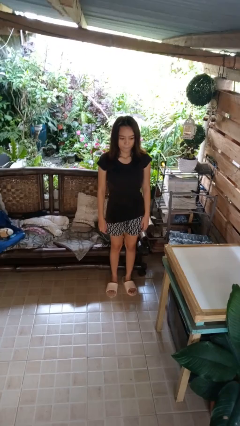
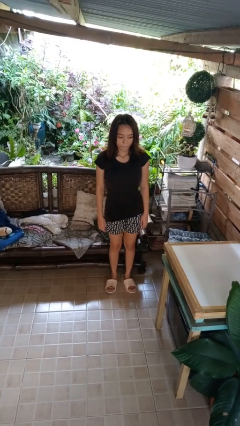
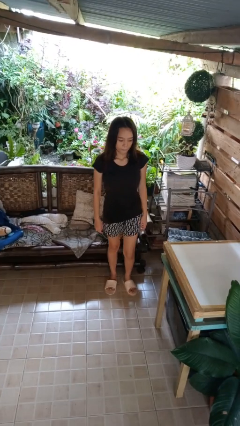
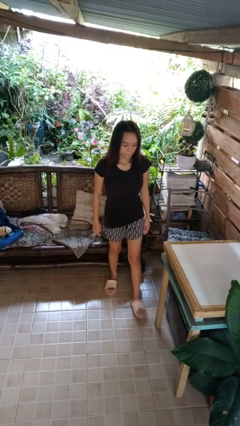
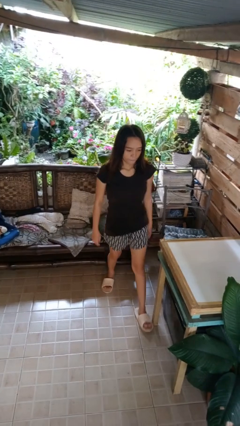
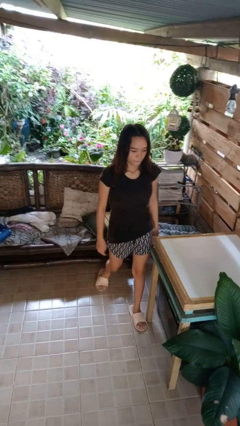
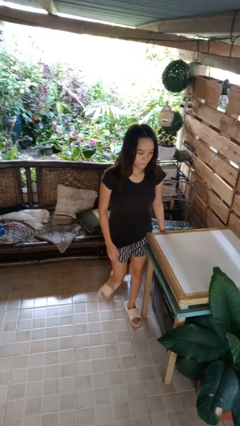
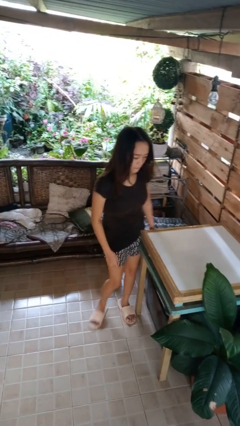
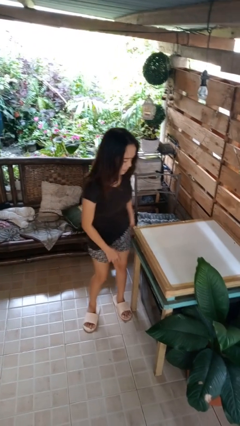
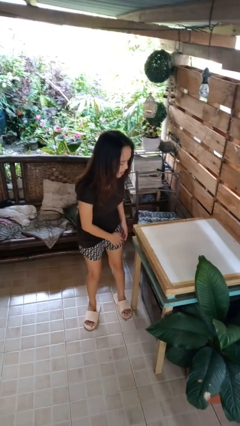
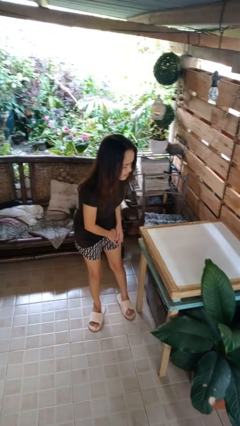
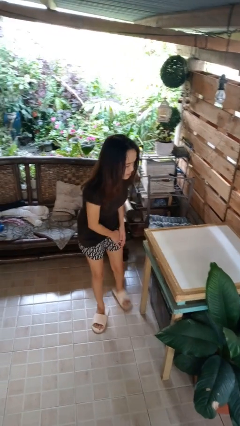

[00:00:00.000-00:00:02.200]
person bumps into table

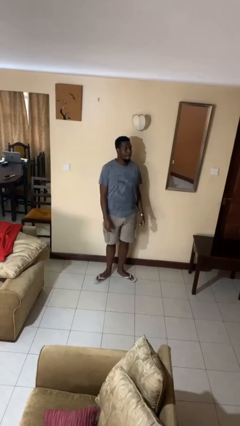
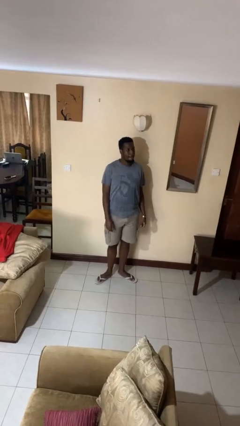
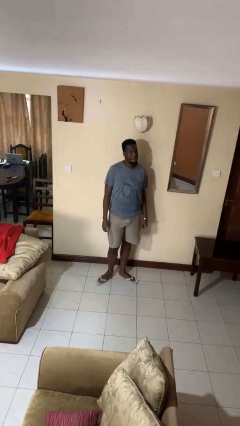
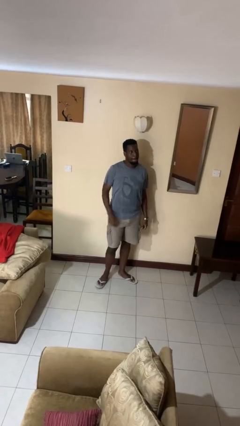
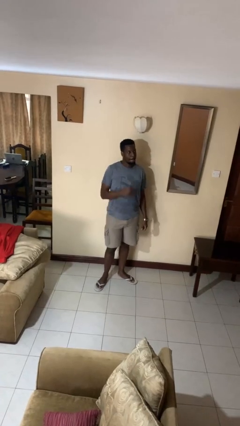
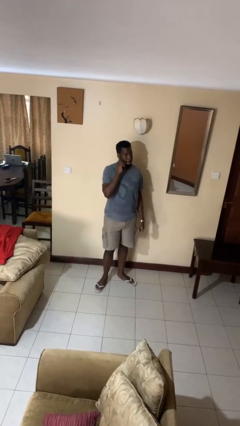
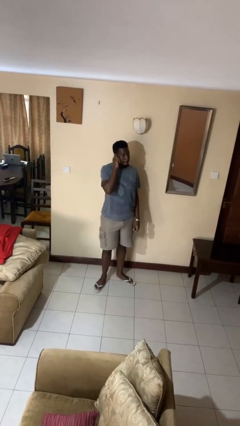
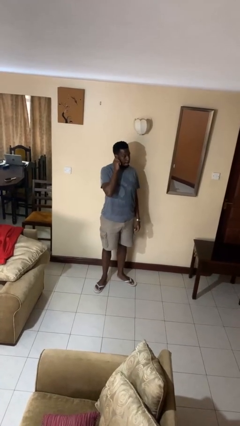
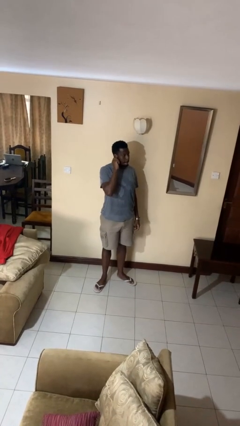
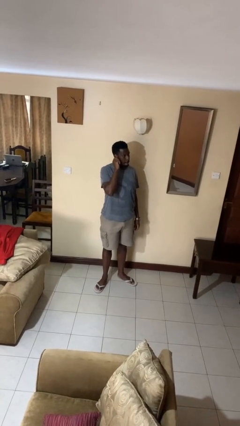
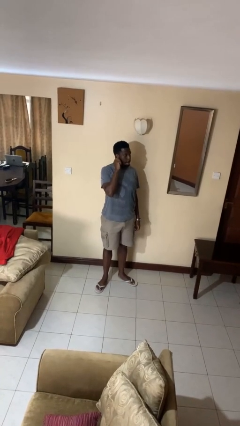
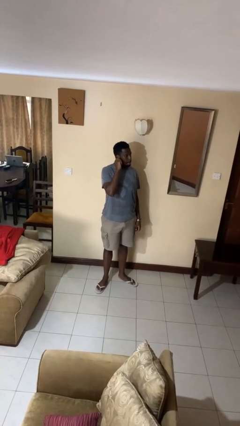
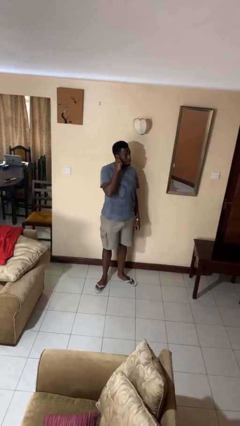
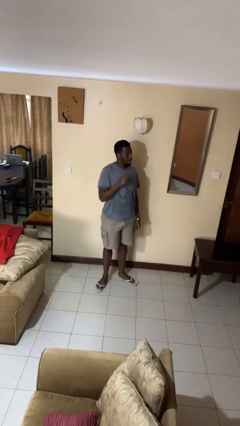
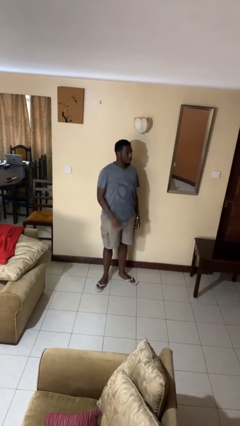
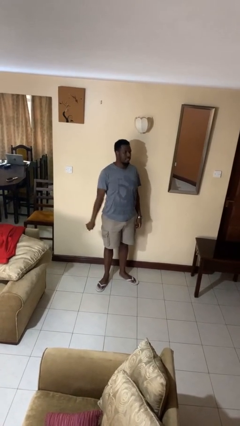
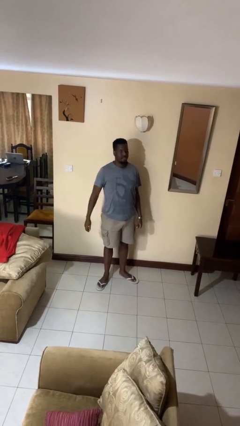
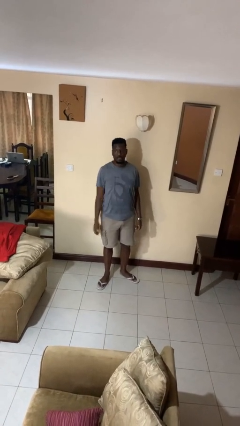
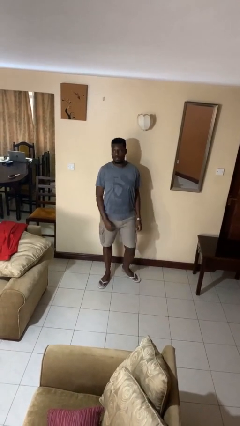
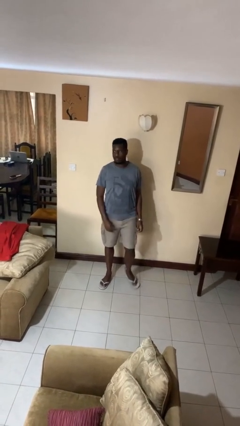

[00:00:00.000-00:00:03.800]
person touches earlobe

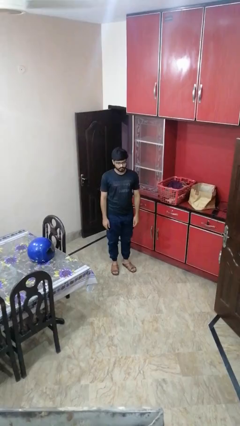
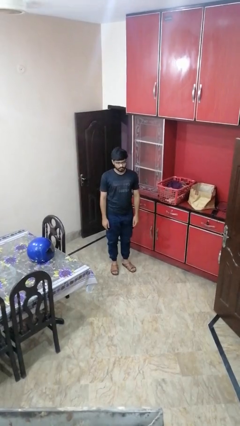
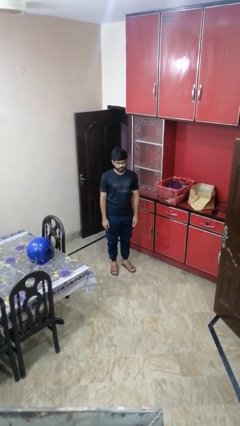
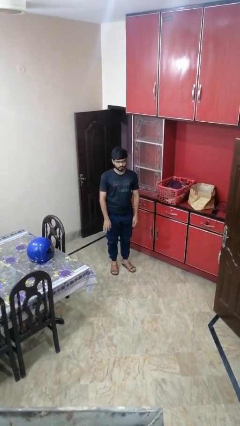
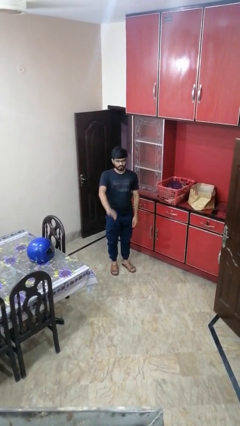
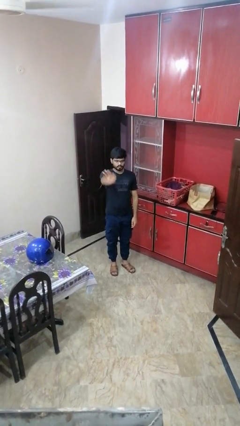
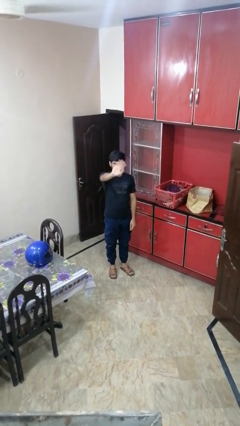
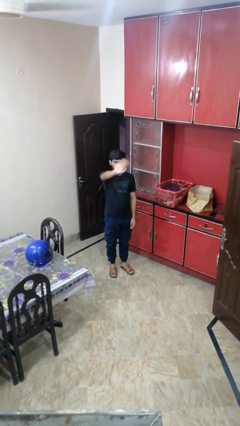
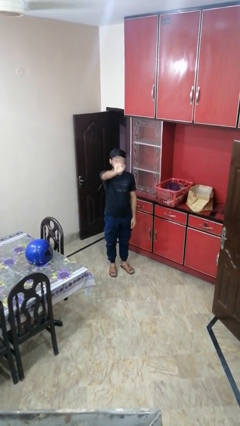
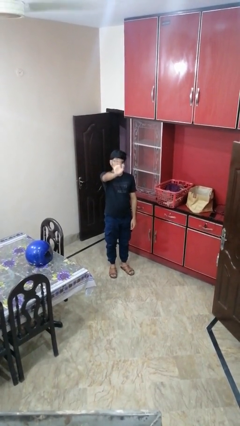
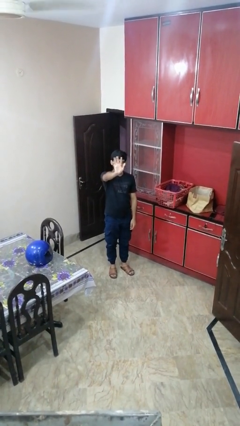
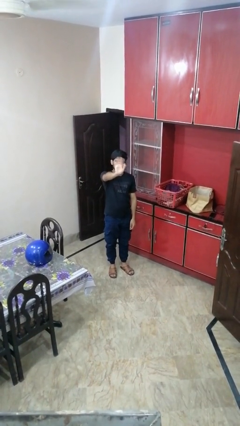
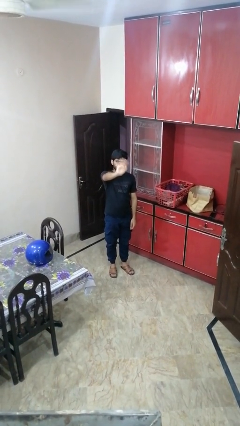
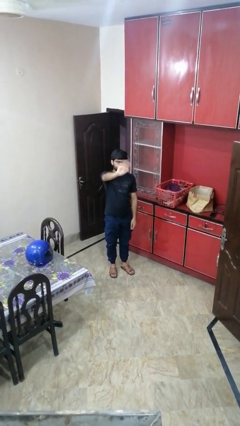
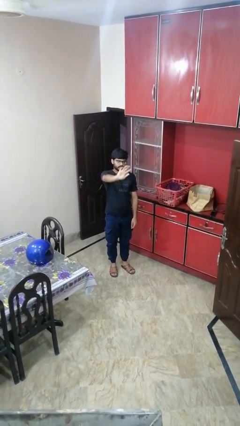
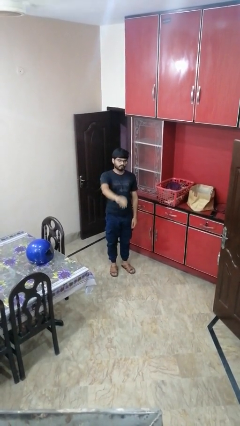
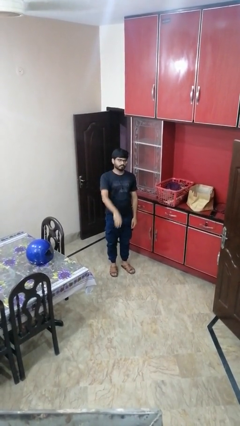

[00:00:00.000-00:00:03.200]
person waves at person

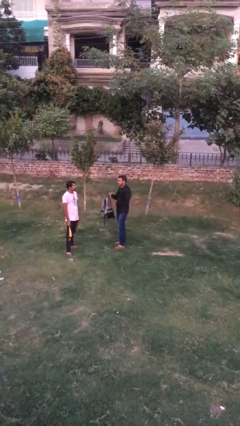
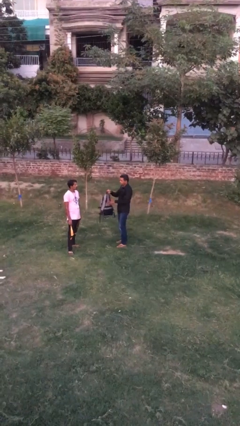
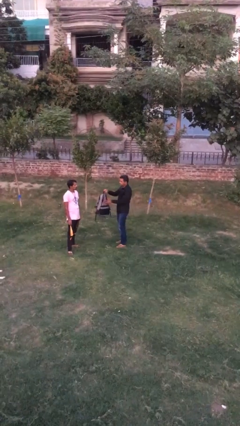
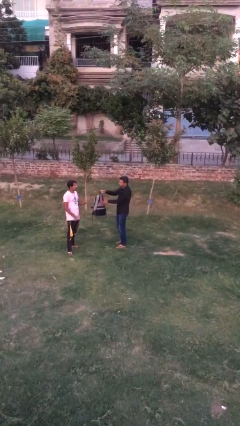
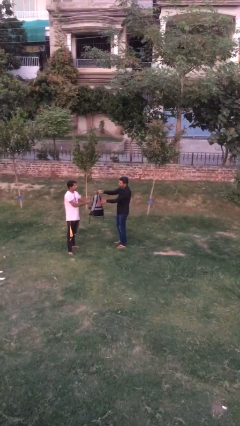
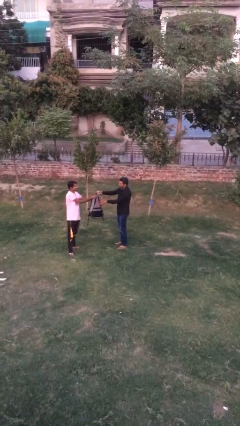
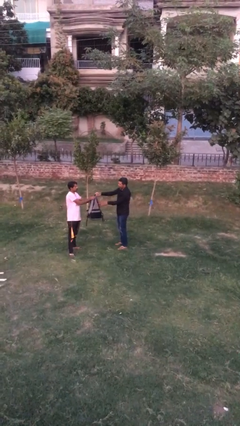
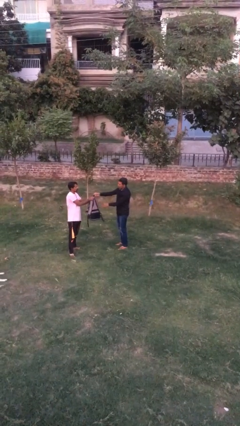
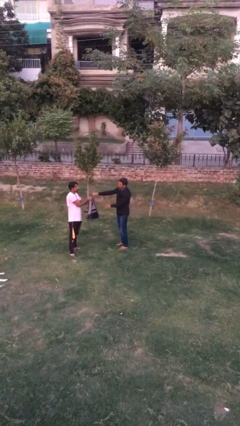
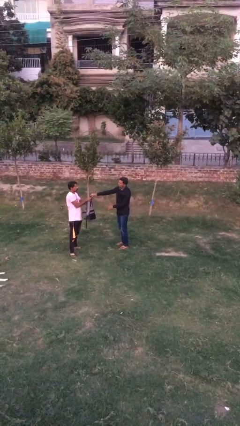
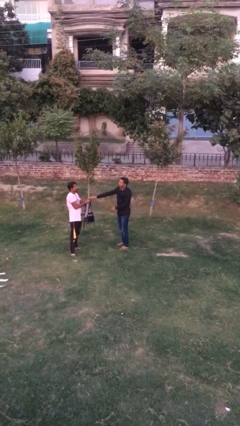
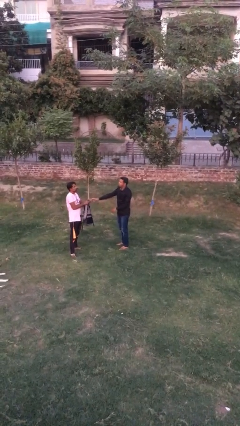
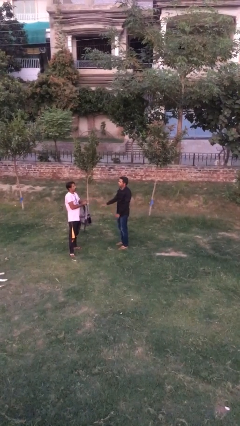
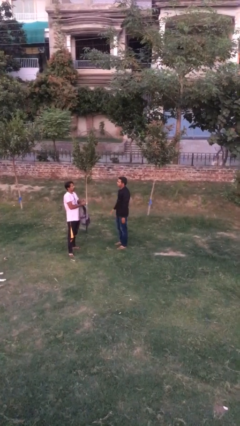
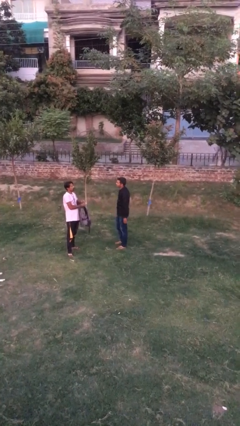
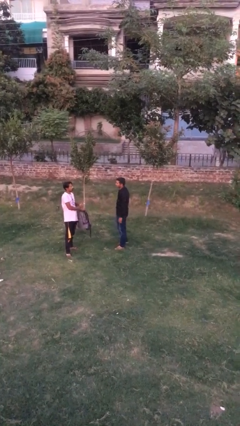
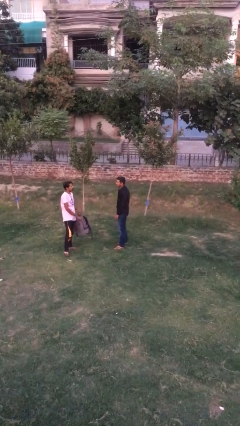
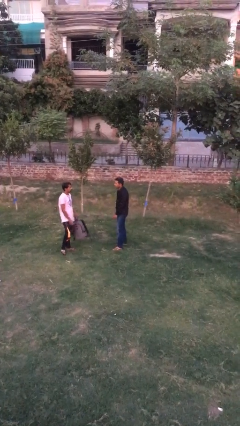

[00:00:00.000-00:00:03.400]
person transfers object to person

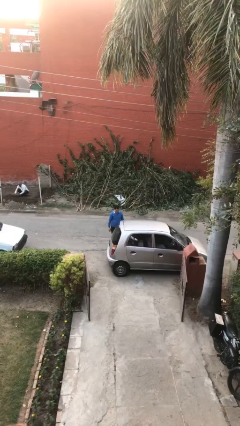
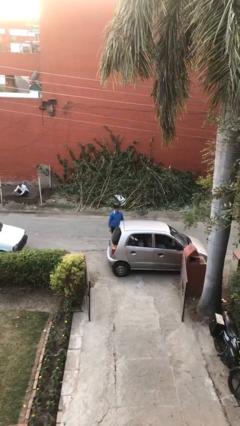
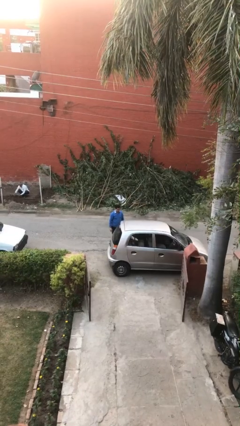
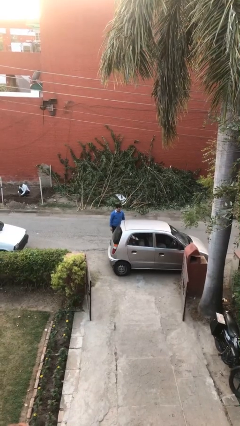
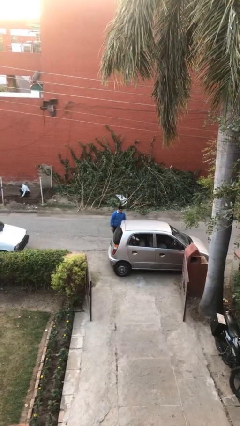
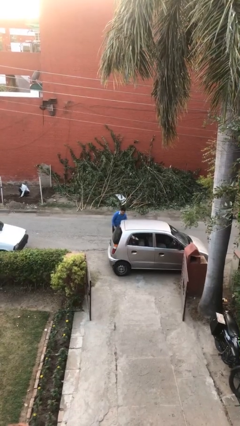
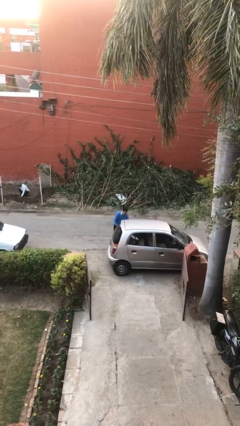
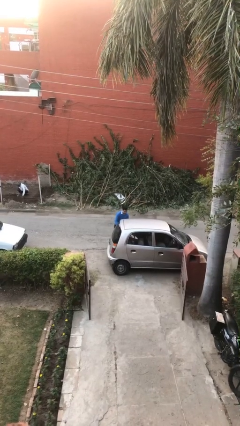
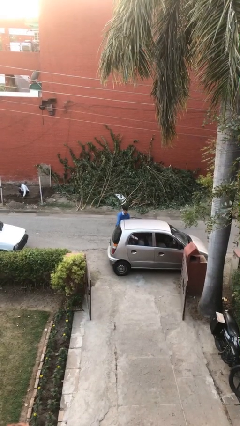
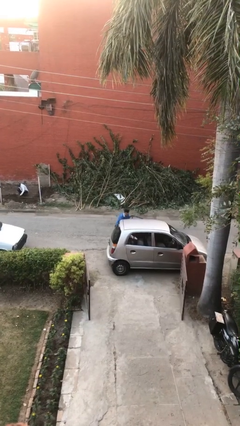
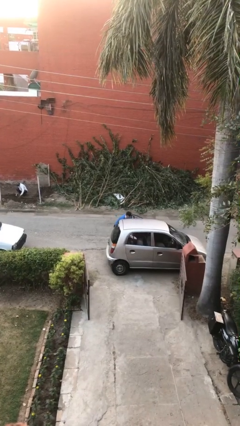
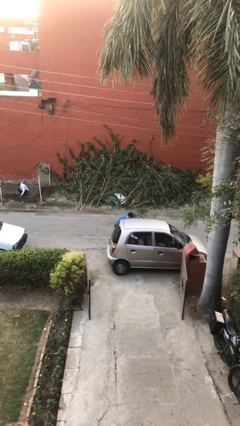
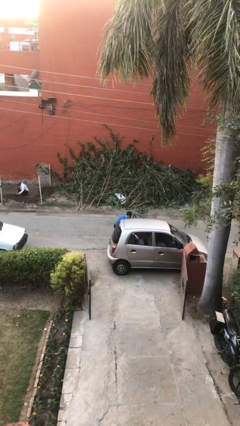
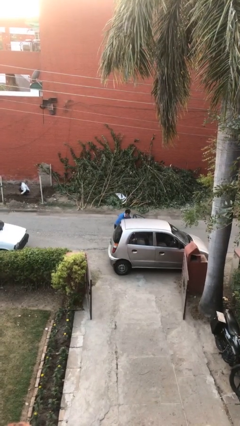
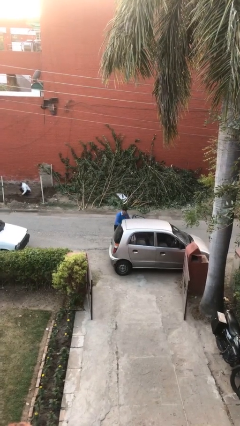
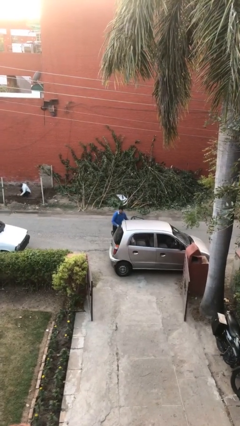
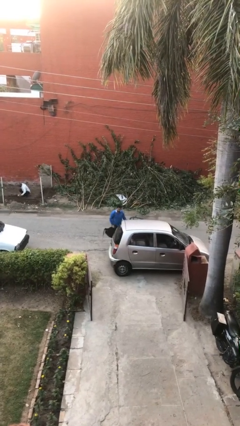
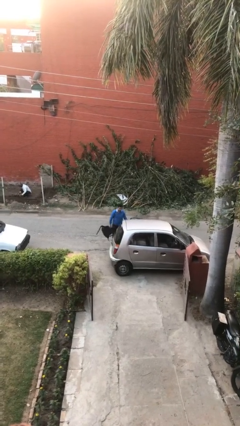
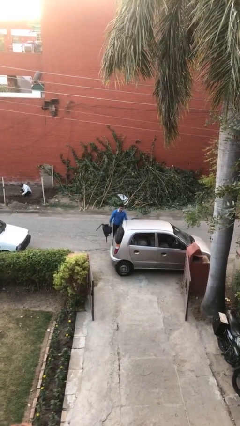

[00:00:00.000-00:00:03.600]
person unloads car

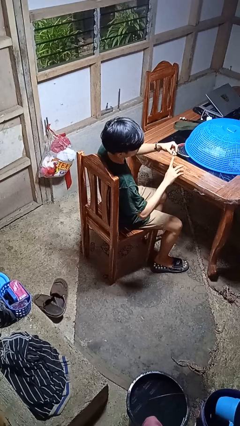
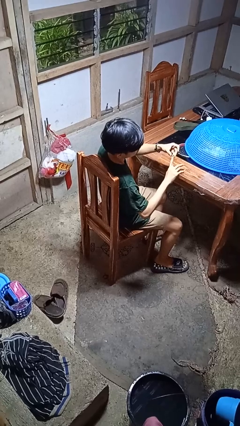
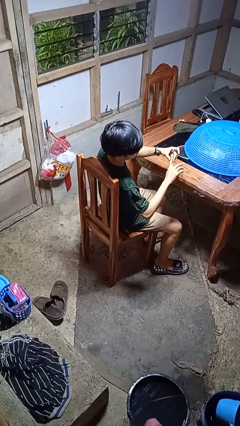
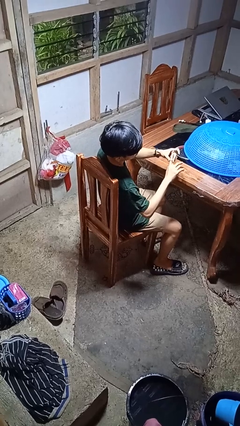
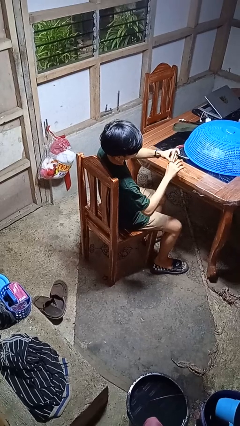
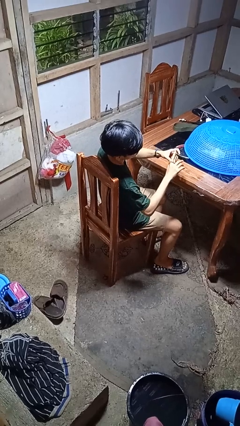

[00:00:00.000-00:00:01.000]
person puts on ring
